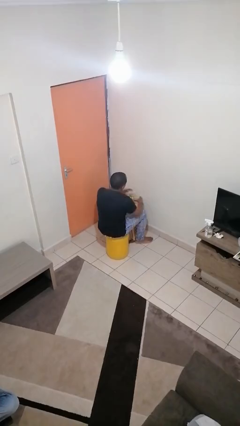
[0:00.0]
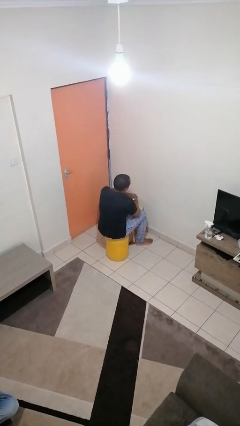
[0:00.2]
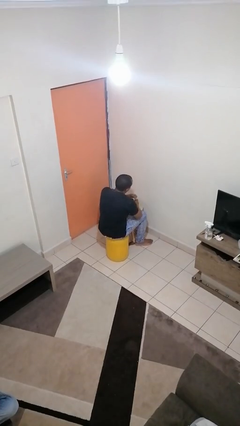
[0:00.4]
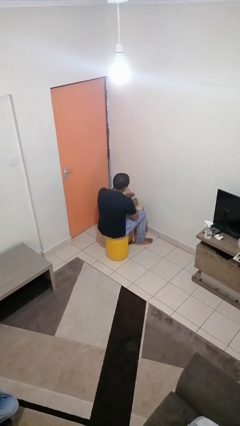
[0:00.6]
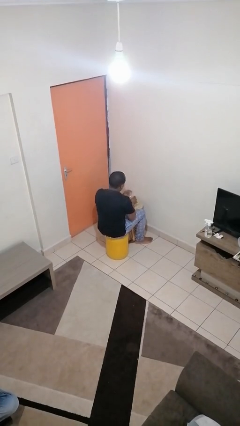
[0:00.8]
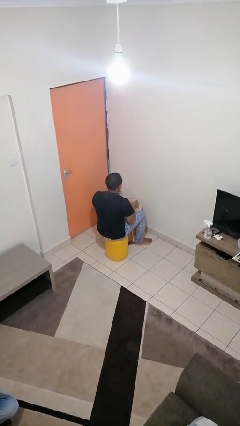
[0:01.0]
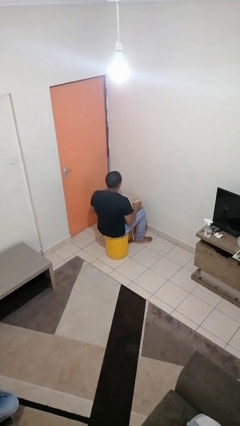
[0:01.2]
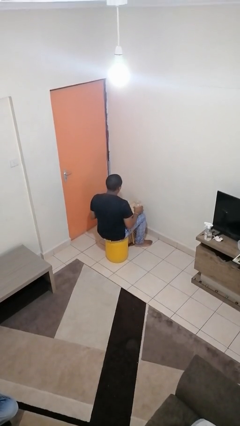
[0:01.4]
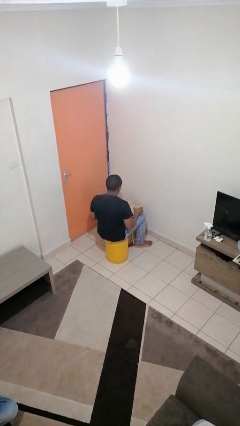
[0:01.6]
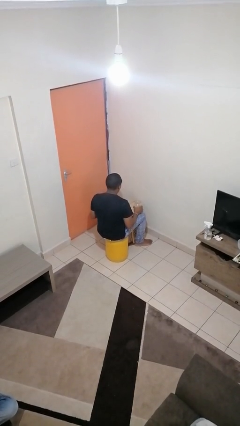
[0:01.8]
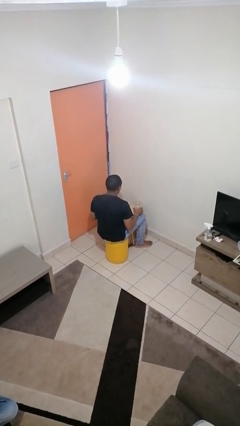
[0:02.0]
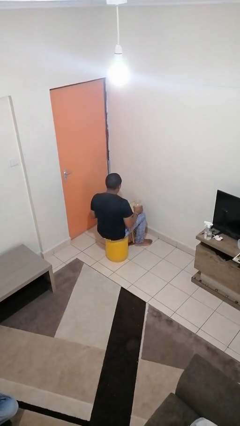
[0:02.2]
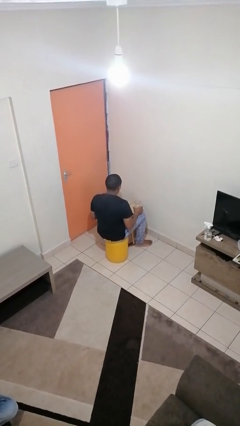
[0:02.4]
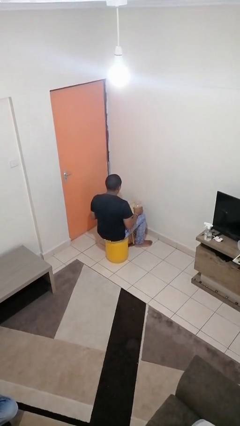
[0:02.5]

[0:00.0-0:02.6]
person opens jar

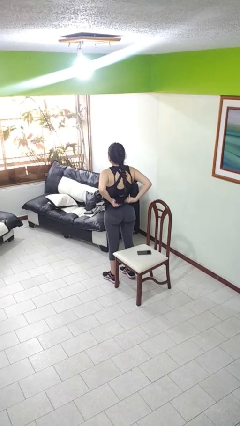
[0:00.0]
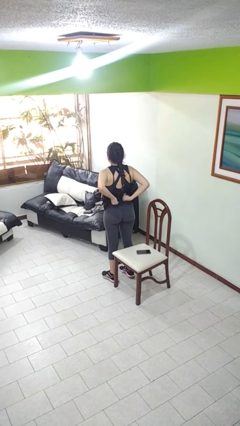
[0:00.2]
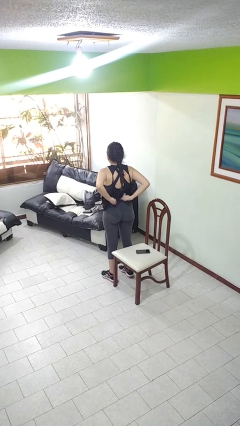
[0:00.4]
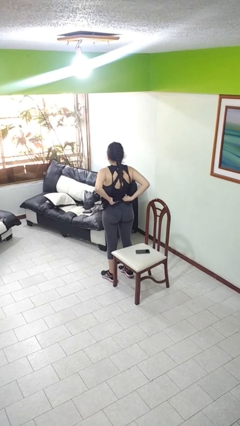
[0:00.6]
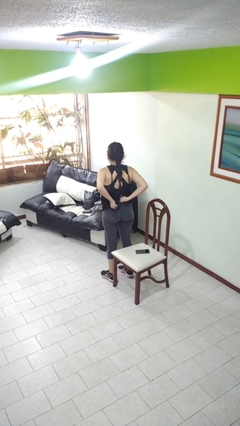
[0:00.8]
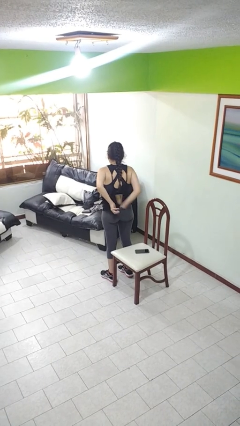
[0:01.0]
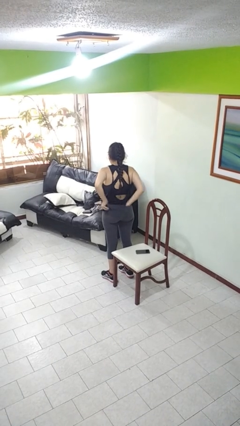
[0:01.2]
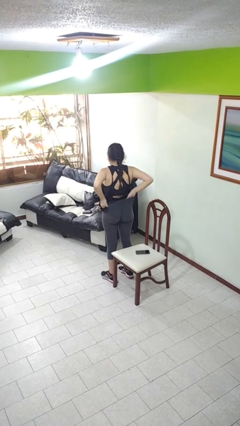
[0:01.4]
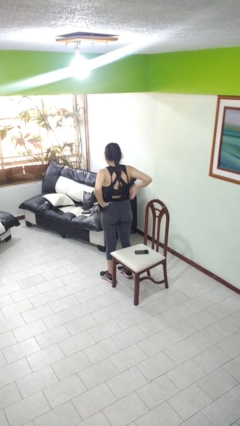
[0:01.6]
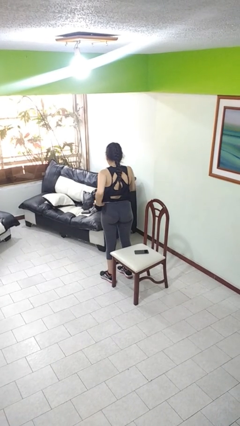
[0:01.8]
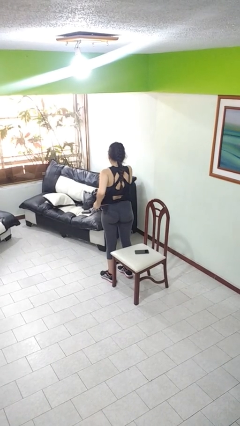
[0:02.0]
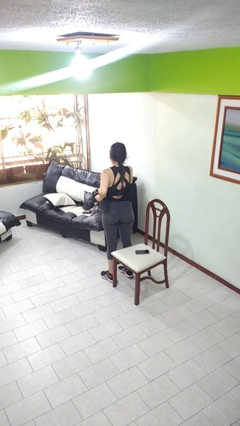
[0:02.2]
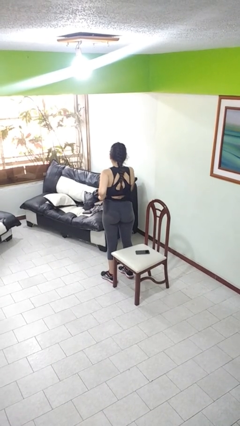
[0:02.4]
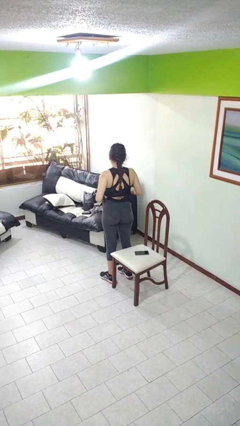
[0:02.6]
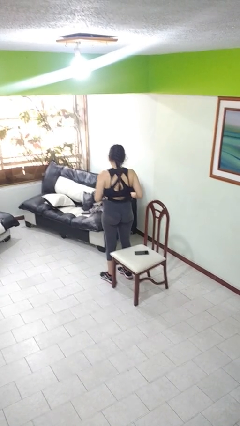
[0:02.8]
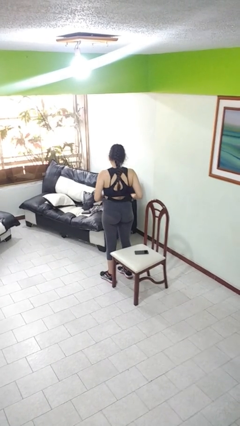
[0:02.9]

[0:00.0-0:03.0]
person tucks in shirt

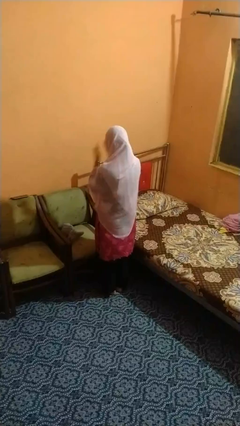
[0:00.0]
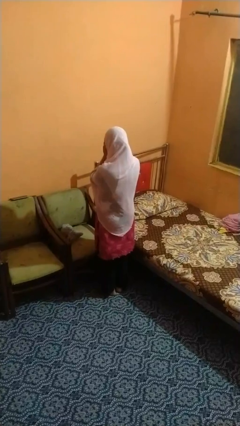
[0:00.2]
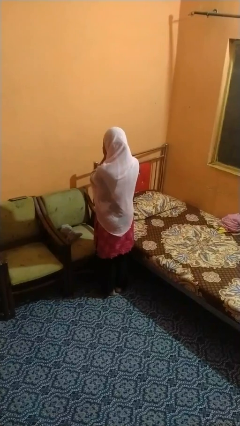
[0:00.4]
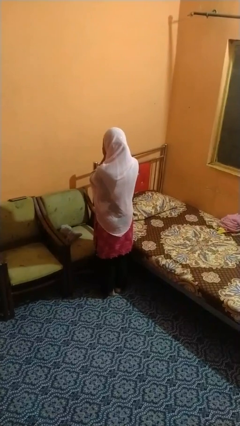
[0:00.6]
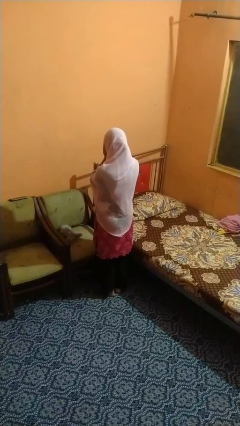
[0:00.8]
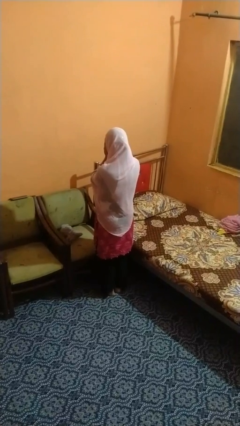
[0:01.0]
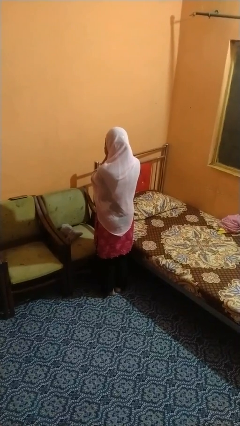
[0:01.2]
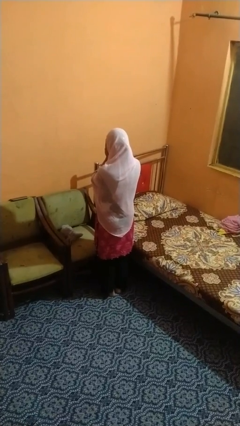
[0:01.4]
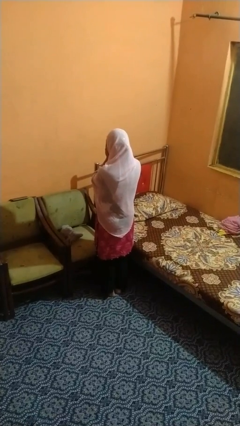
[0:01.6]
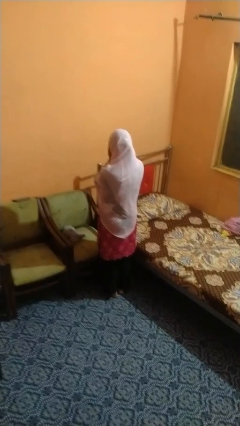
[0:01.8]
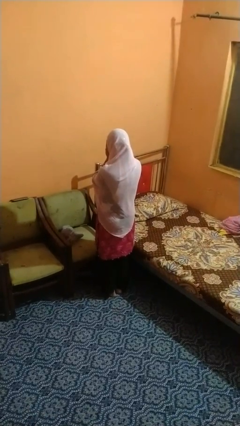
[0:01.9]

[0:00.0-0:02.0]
person covers face with hands

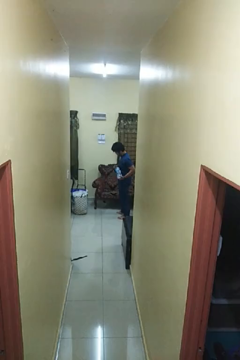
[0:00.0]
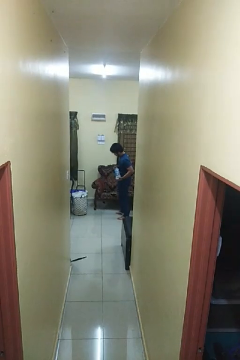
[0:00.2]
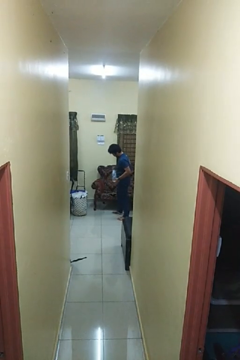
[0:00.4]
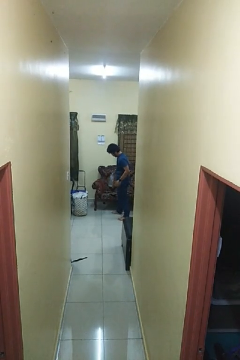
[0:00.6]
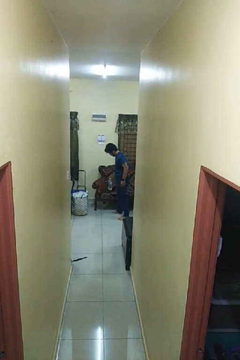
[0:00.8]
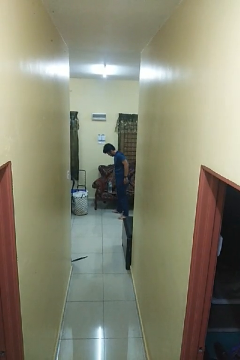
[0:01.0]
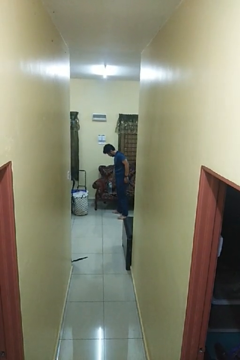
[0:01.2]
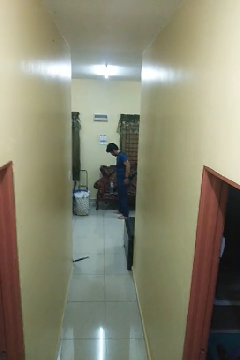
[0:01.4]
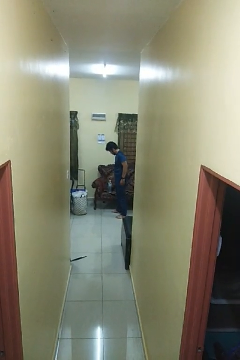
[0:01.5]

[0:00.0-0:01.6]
person puts down object on couch

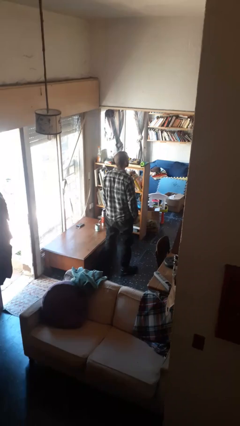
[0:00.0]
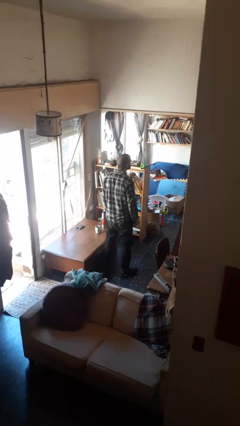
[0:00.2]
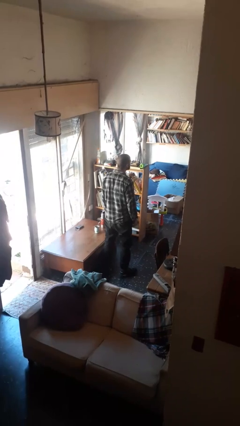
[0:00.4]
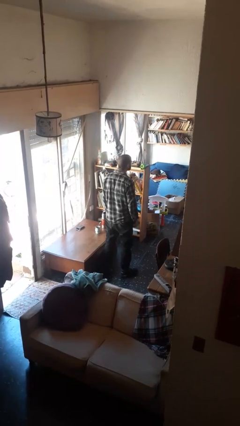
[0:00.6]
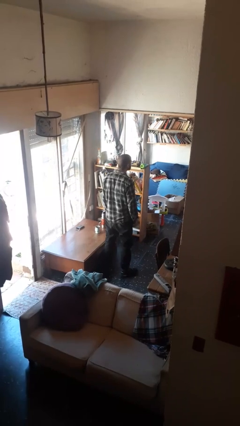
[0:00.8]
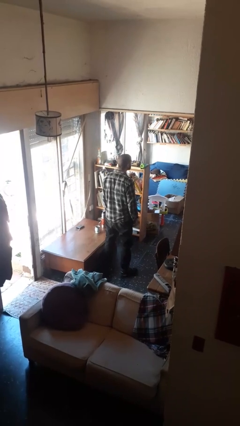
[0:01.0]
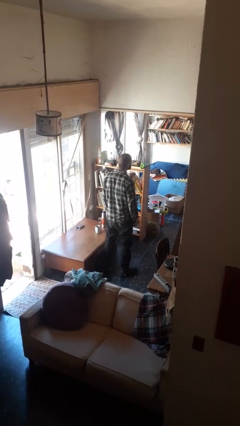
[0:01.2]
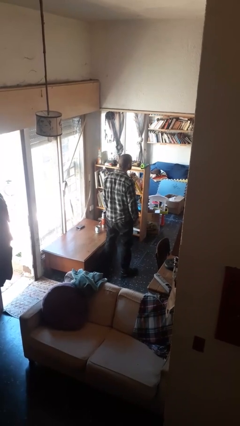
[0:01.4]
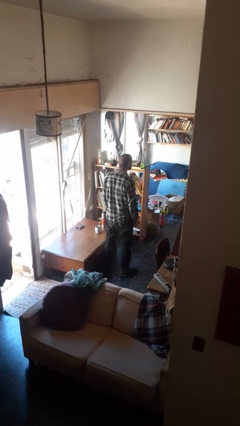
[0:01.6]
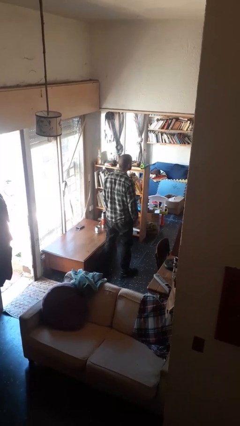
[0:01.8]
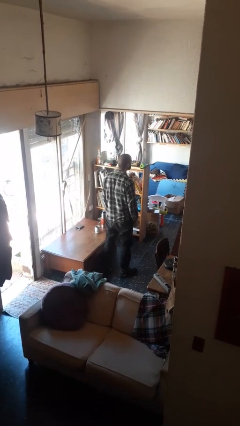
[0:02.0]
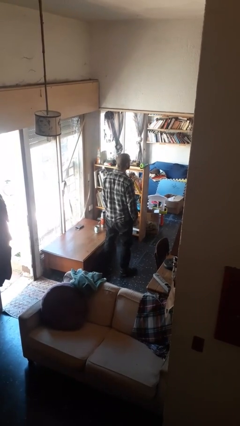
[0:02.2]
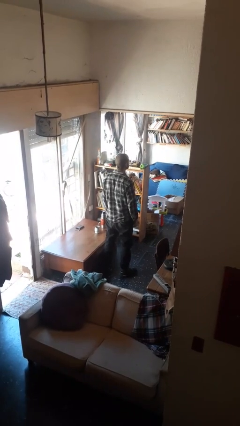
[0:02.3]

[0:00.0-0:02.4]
person sticks out tongue

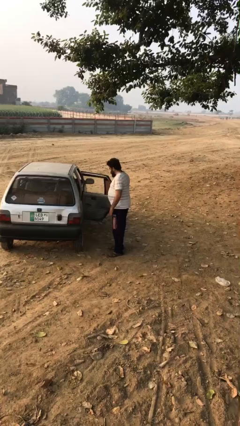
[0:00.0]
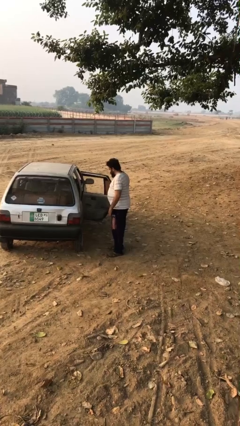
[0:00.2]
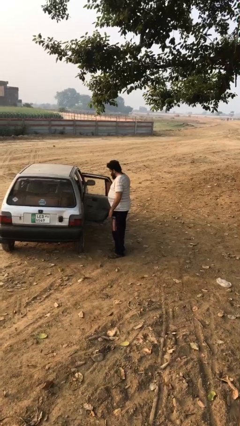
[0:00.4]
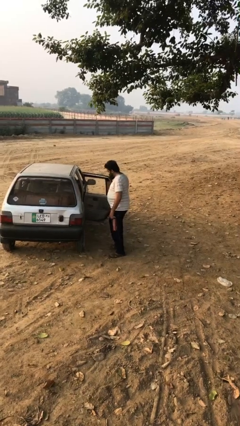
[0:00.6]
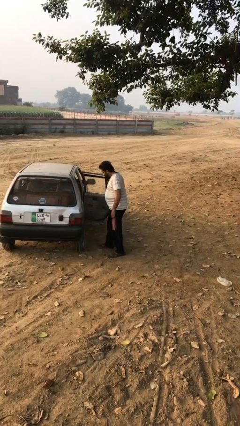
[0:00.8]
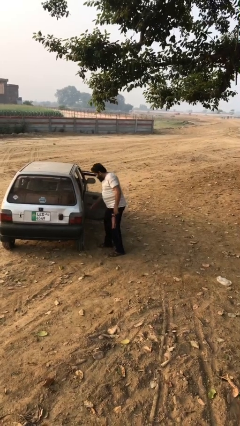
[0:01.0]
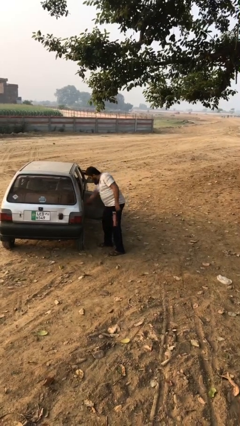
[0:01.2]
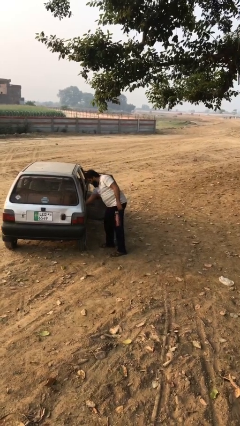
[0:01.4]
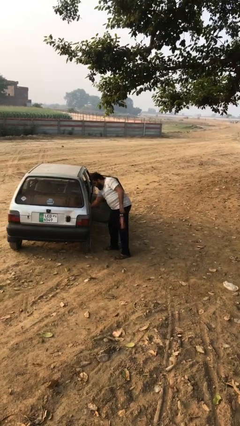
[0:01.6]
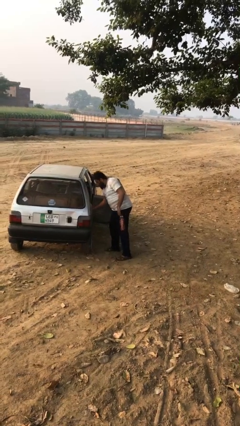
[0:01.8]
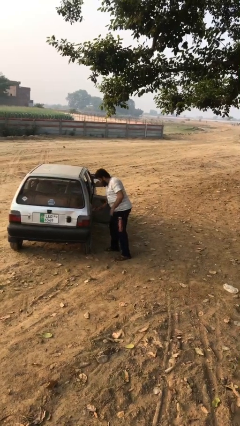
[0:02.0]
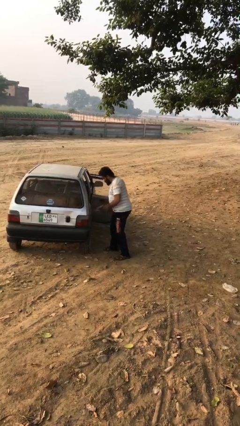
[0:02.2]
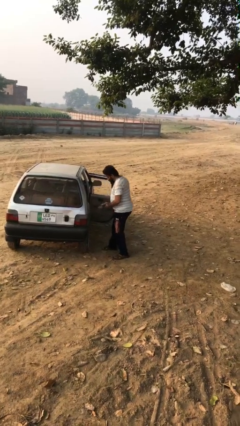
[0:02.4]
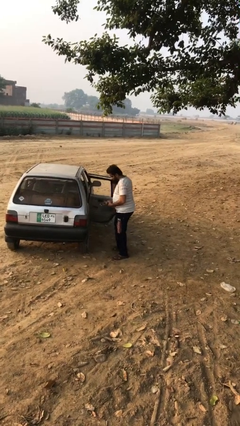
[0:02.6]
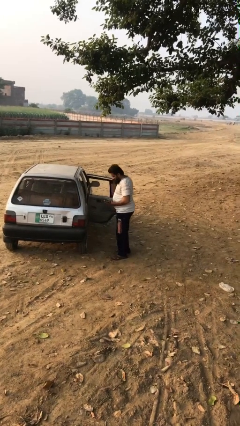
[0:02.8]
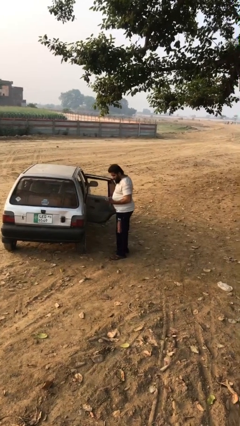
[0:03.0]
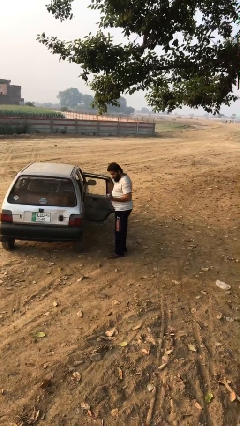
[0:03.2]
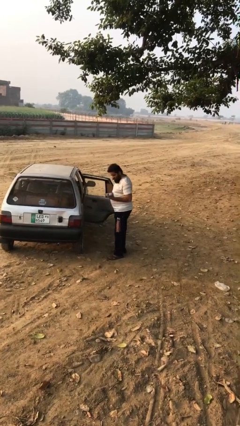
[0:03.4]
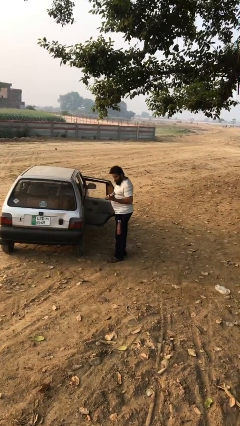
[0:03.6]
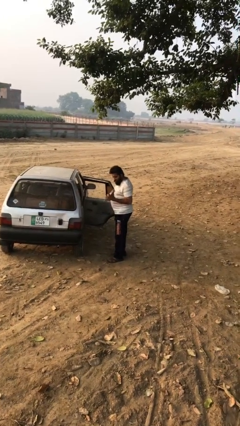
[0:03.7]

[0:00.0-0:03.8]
person unloads car

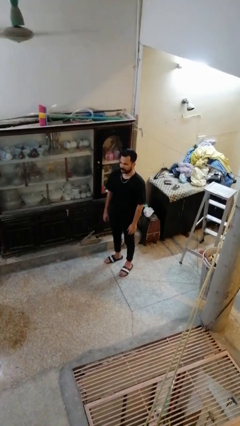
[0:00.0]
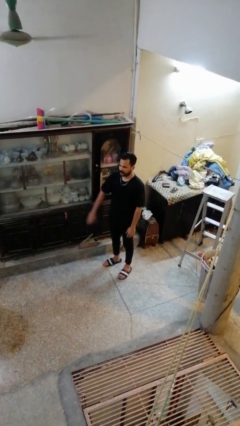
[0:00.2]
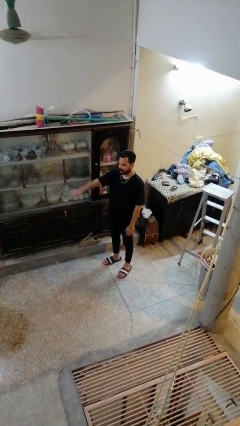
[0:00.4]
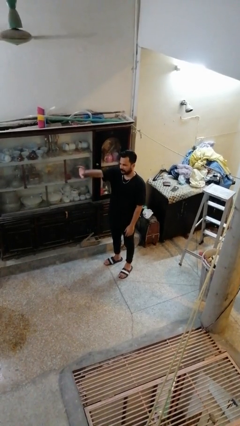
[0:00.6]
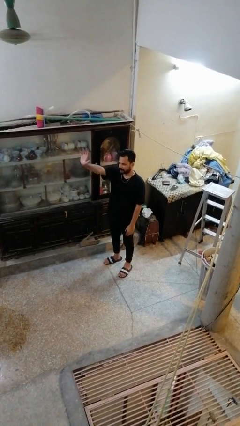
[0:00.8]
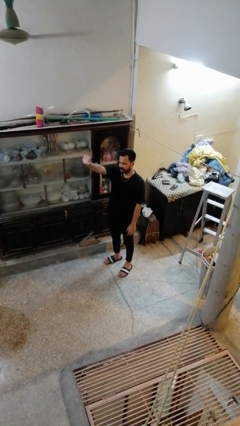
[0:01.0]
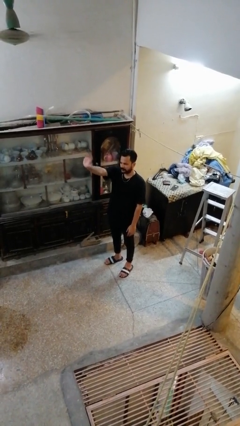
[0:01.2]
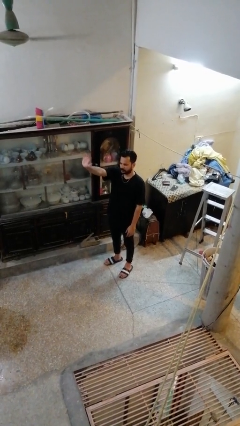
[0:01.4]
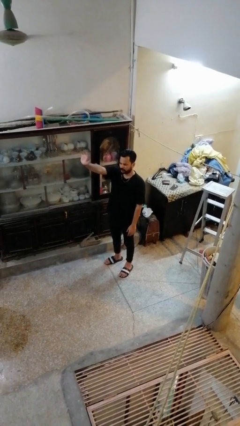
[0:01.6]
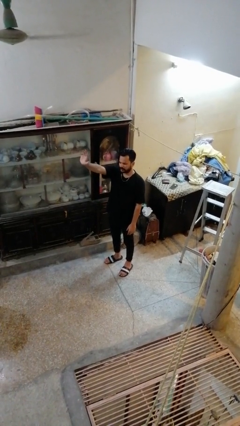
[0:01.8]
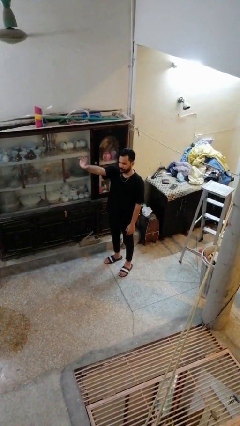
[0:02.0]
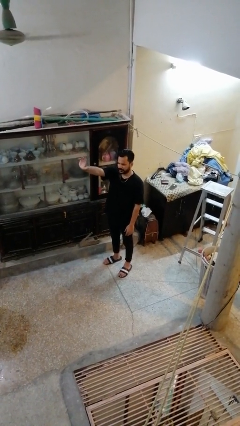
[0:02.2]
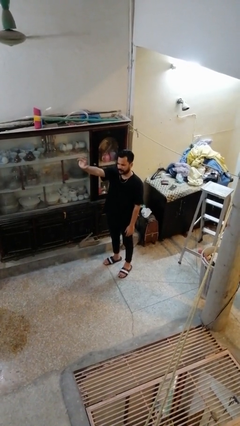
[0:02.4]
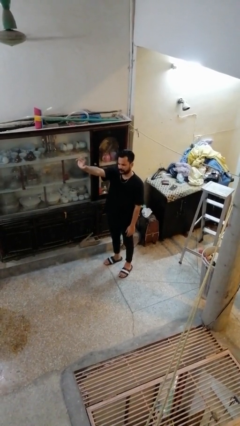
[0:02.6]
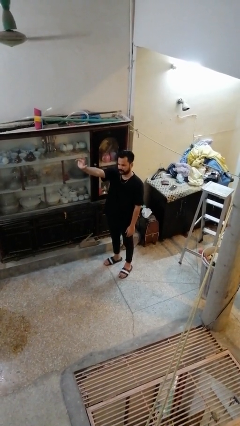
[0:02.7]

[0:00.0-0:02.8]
person waves at person
